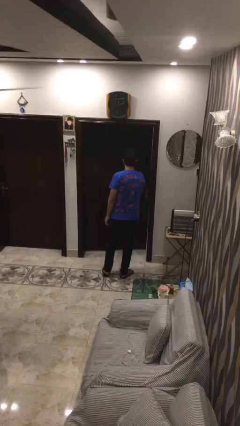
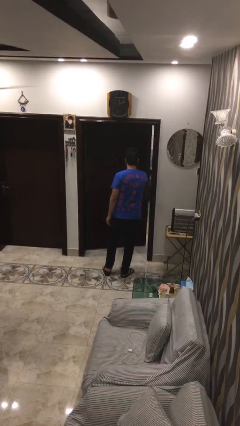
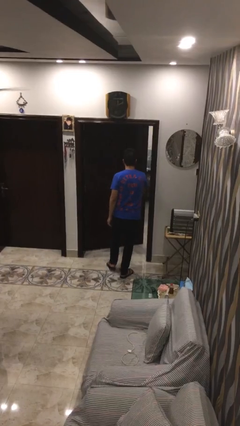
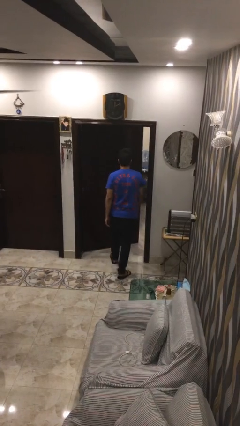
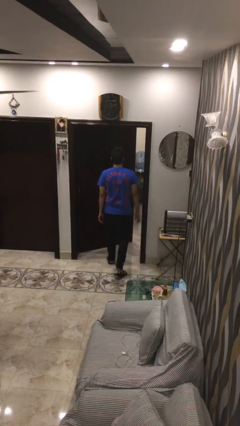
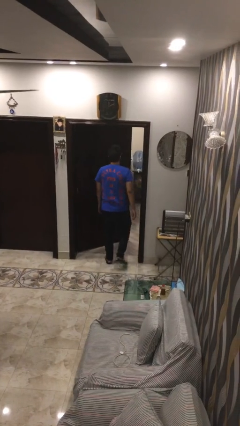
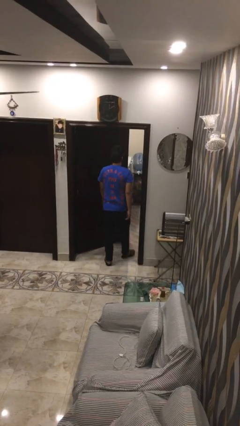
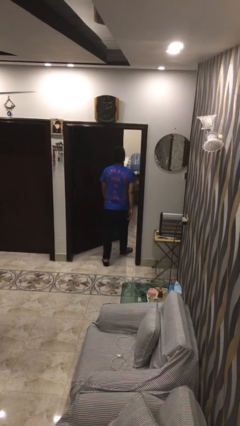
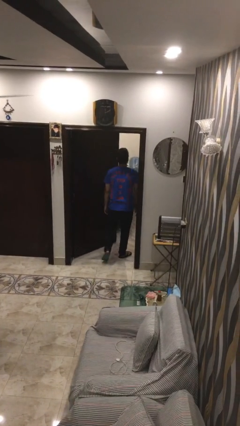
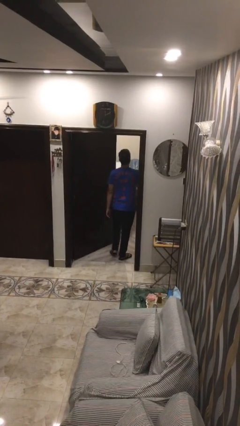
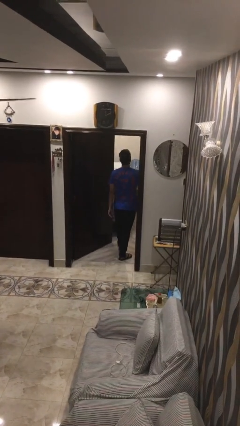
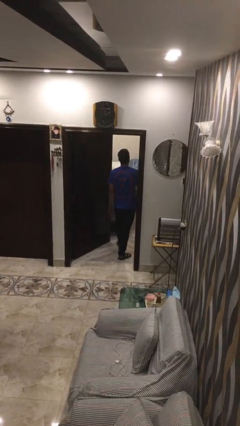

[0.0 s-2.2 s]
person exits scene through structure

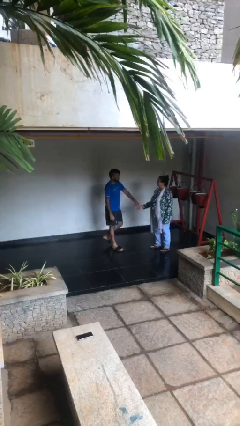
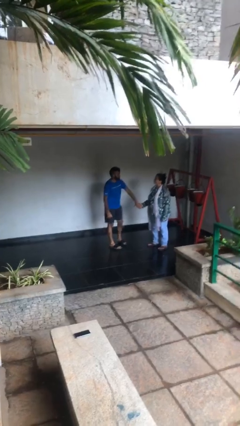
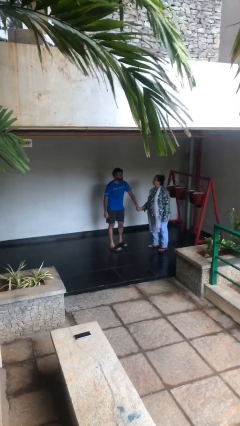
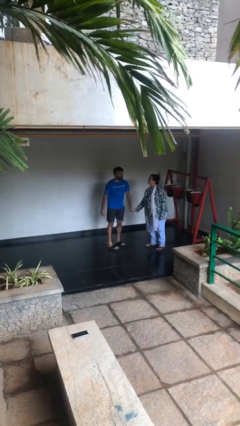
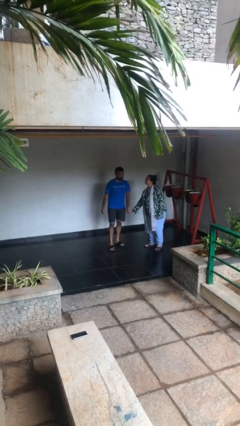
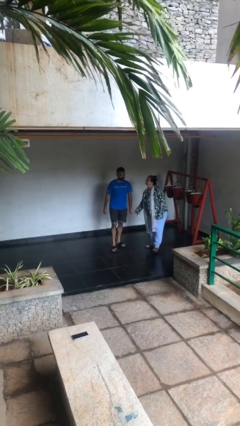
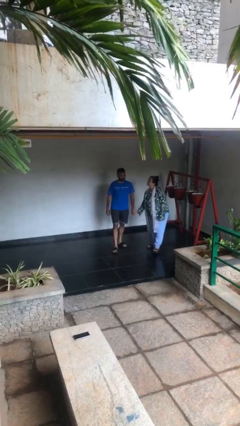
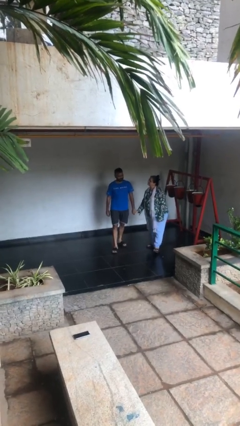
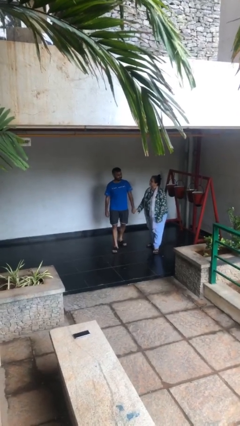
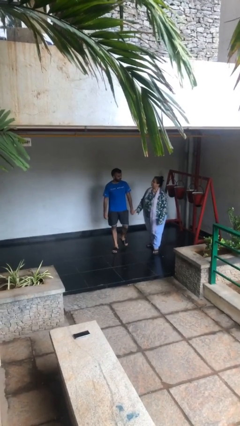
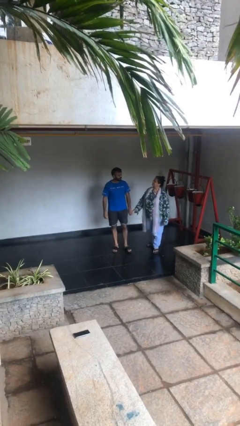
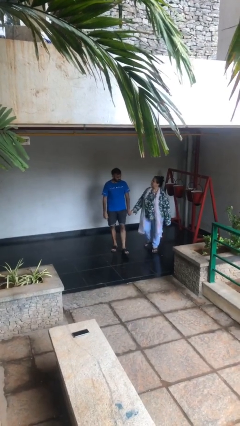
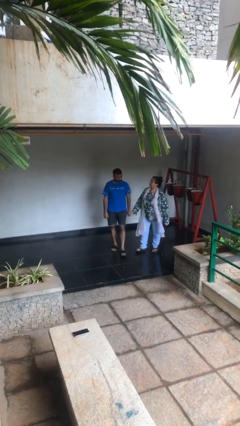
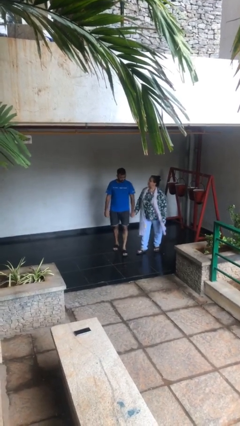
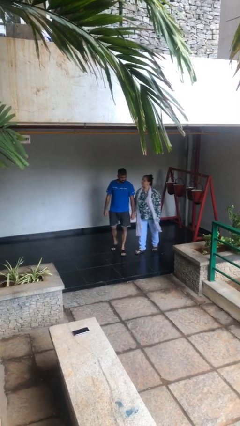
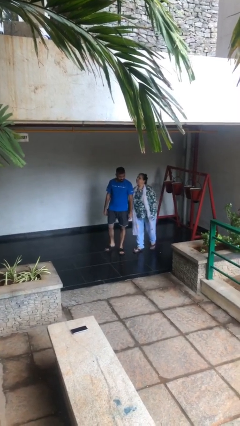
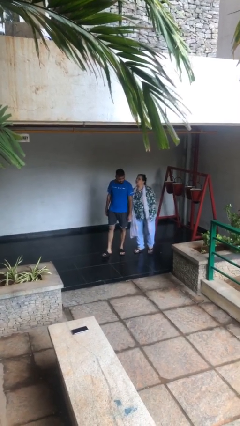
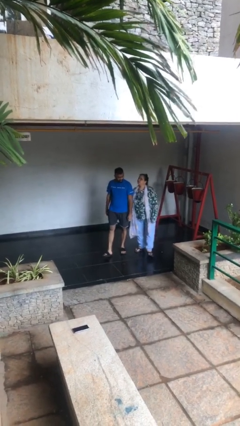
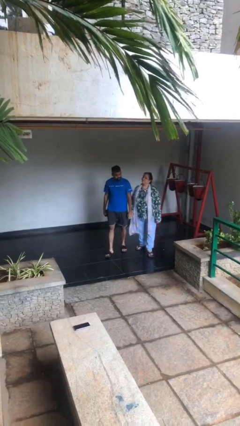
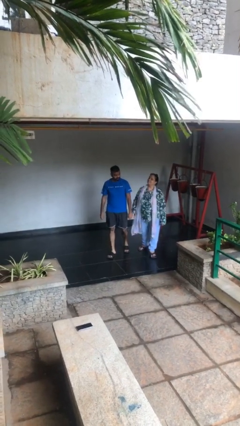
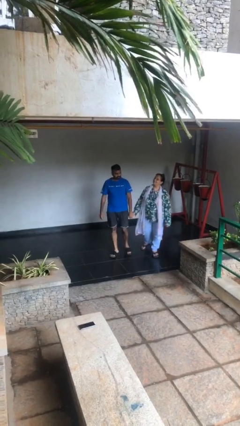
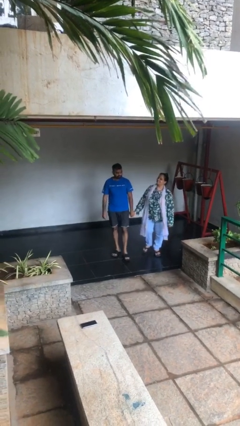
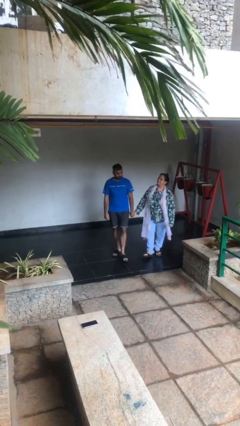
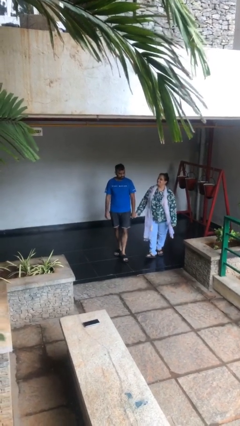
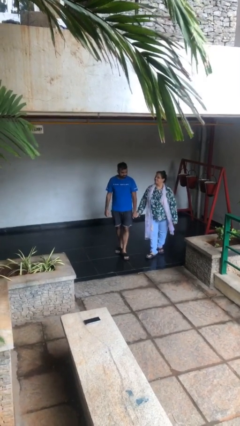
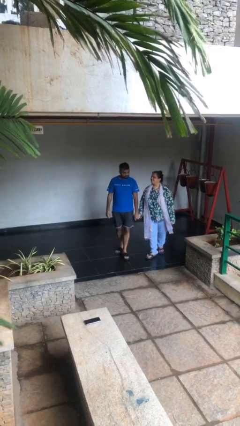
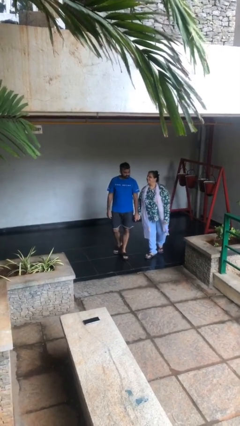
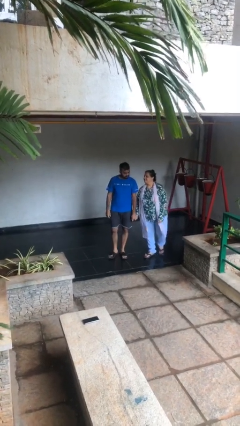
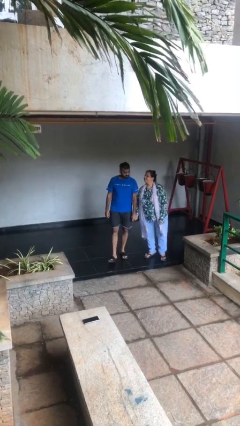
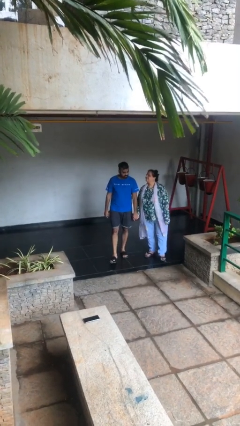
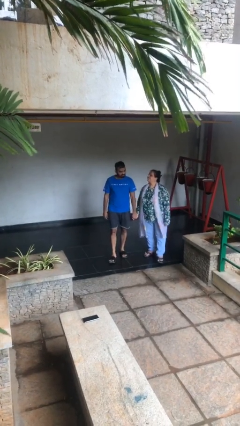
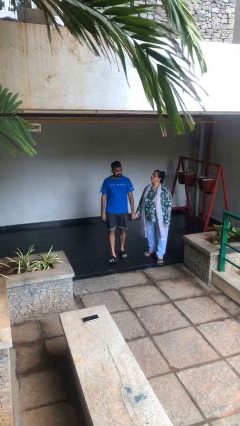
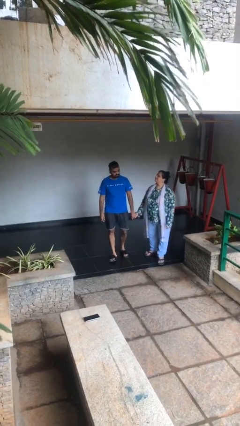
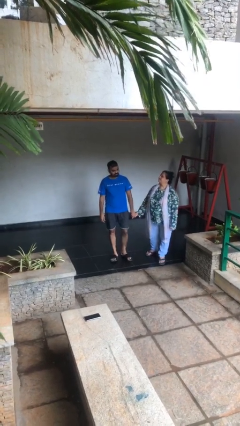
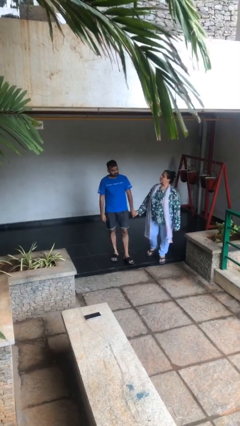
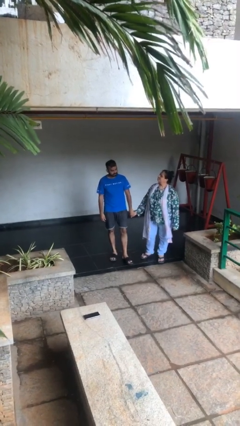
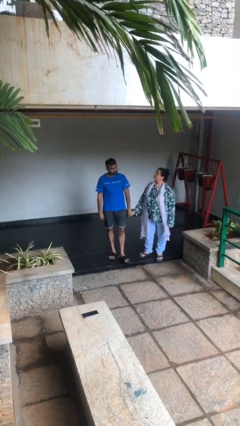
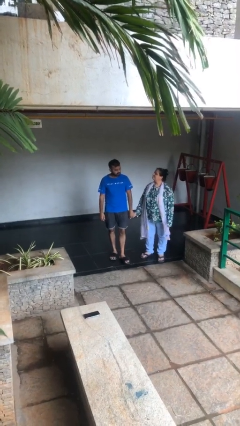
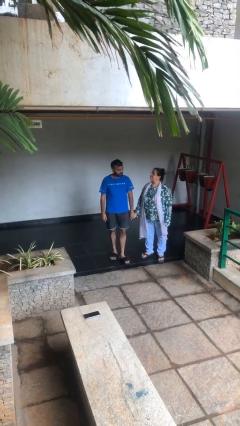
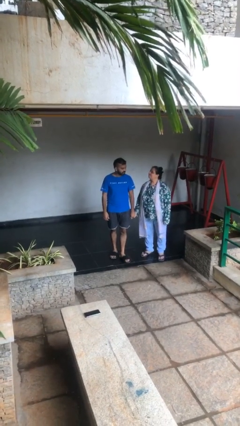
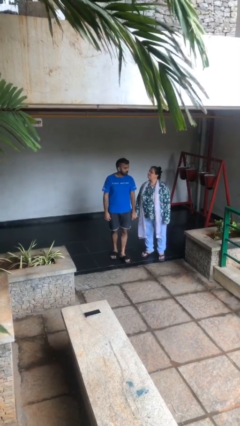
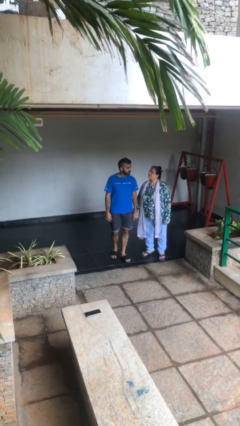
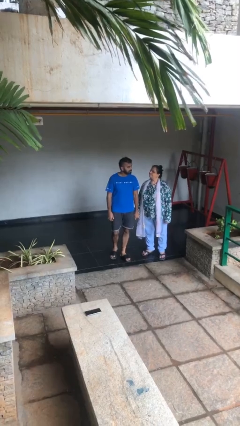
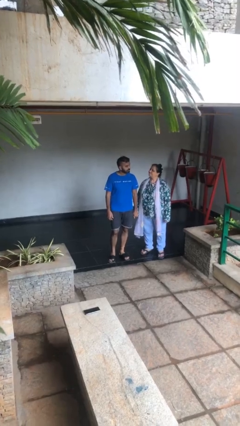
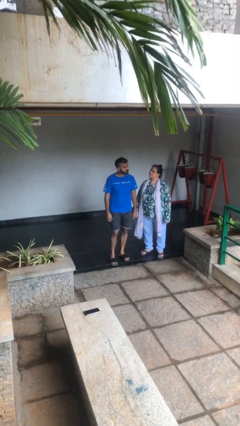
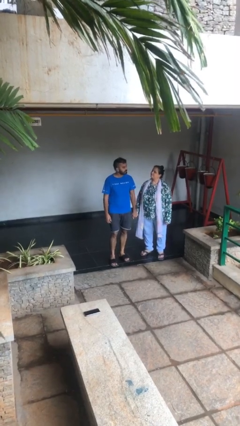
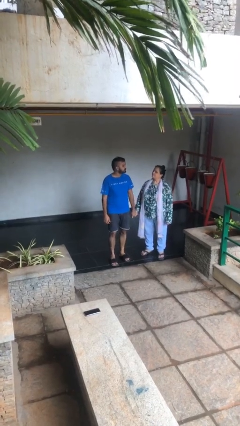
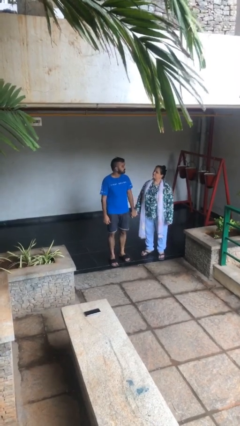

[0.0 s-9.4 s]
person holds hand

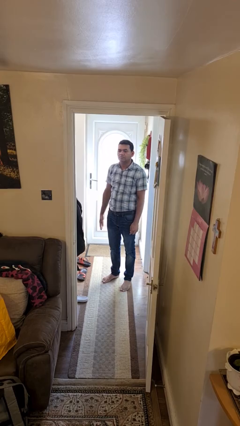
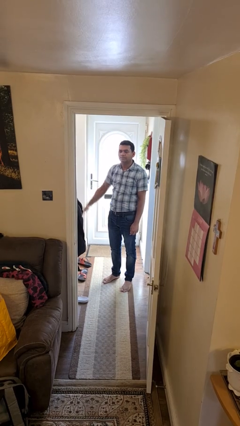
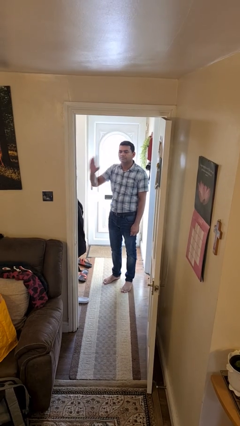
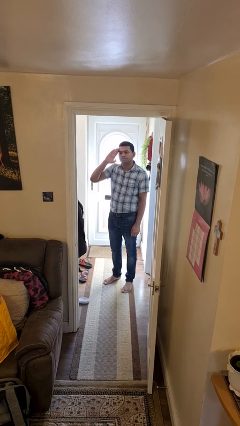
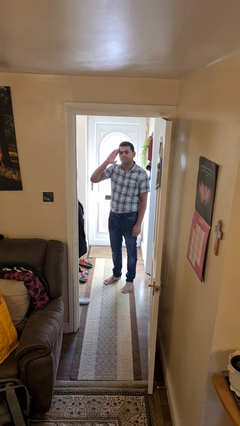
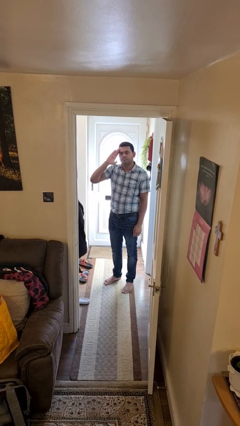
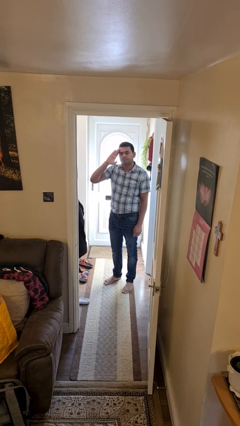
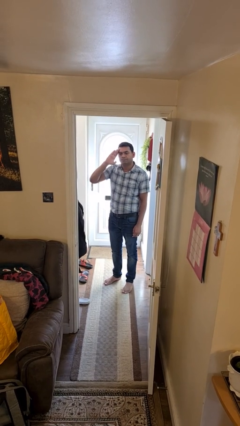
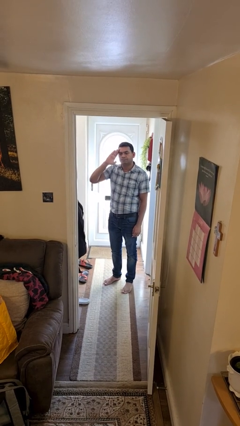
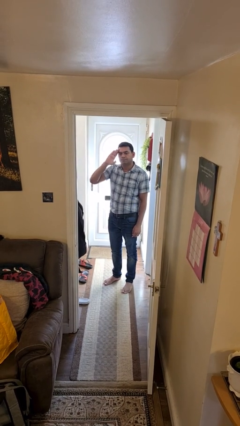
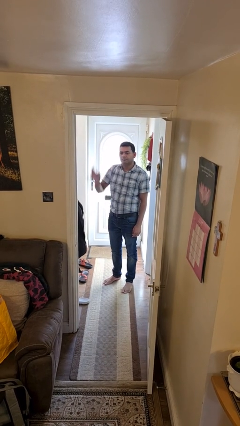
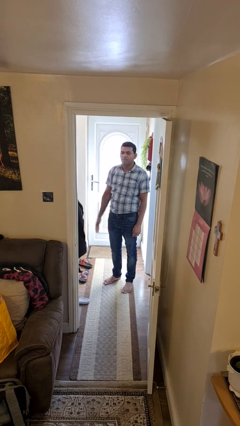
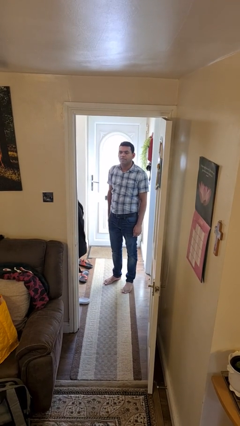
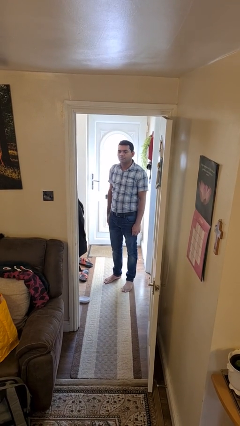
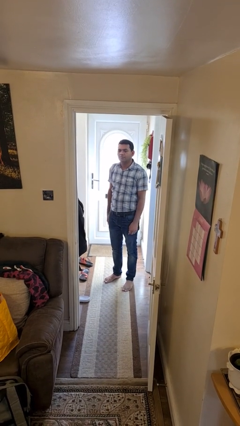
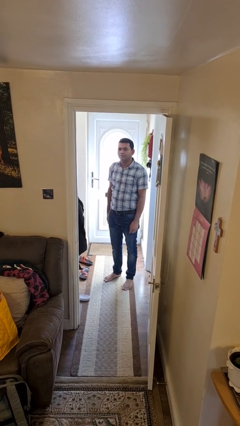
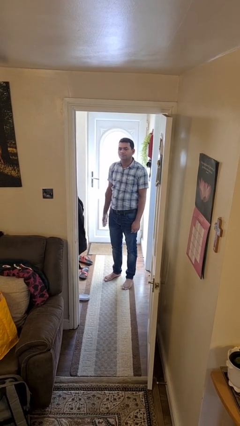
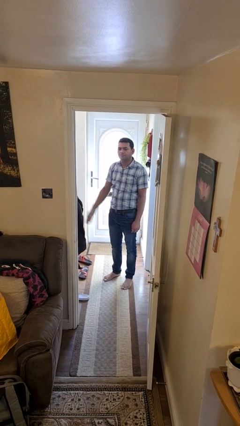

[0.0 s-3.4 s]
person salutes

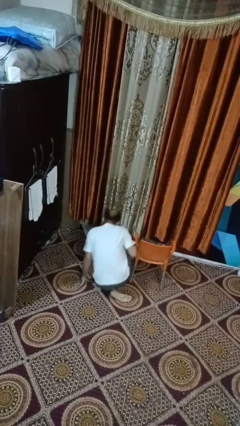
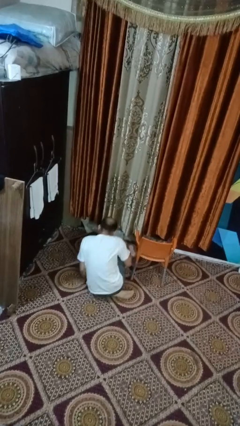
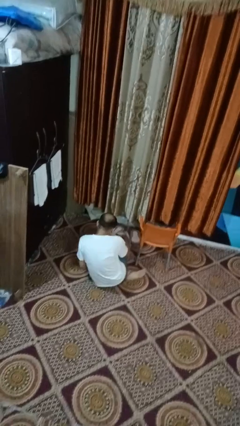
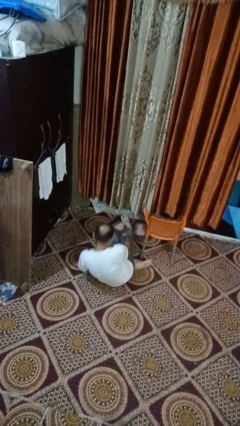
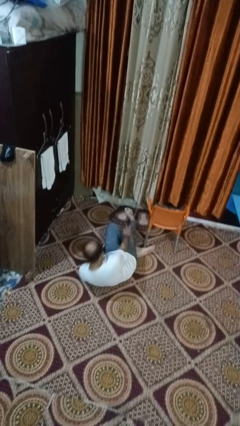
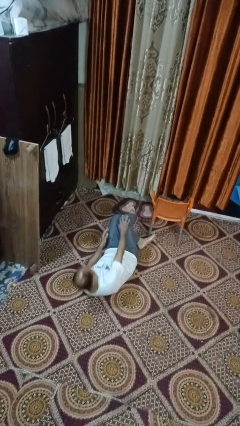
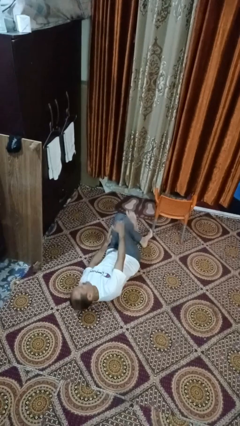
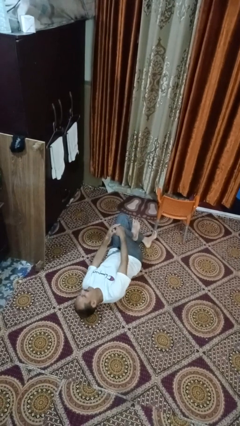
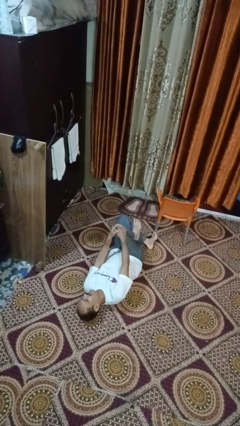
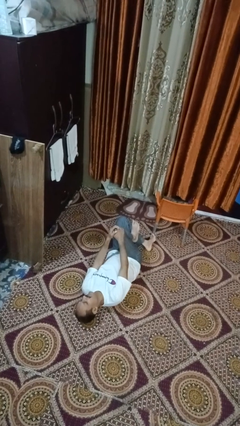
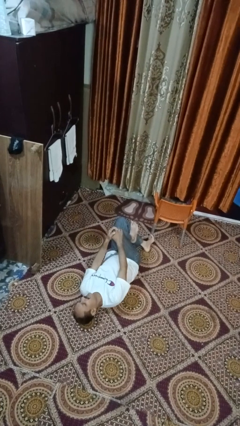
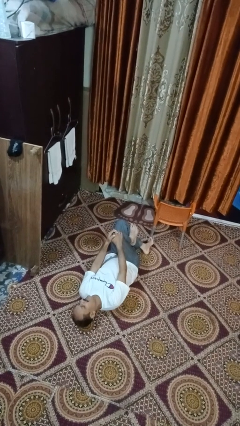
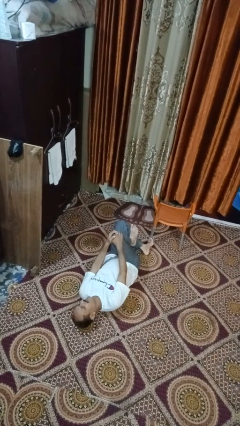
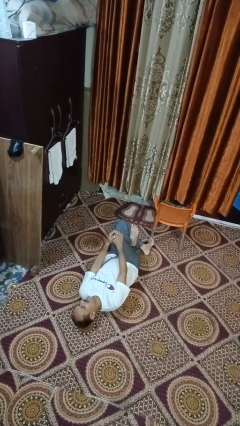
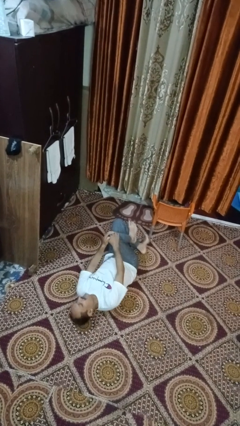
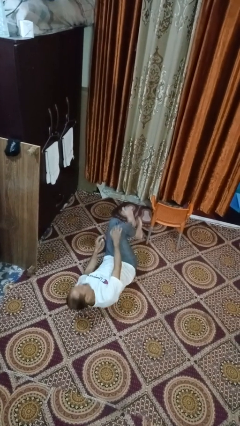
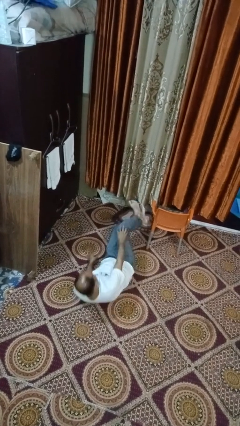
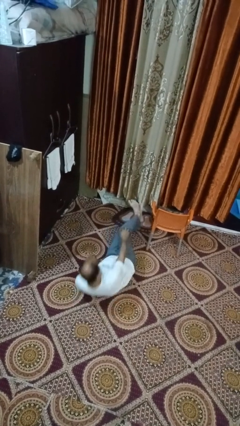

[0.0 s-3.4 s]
person lies down on floor
